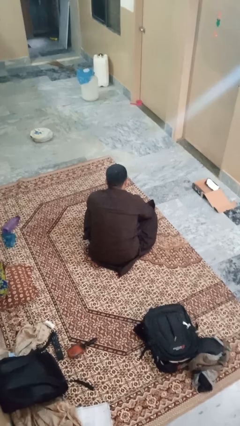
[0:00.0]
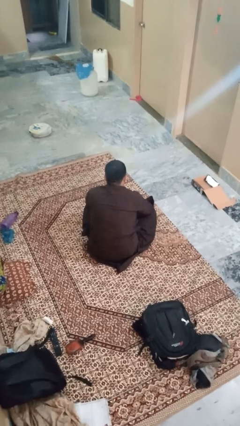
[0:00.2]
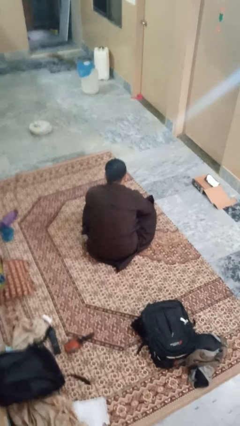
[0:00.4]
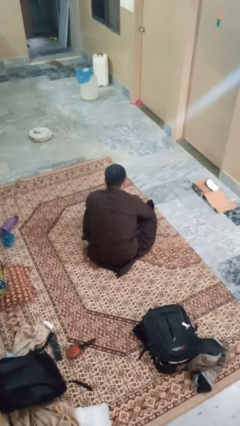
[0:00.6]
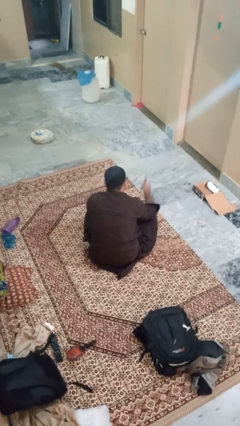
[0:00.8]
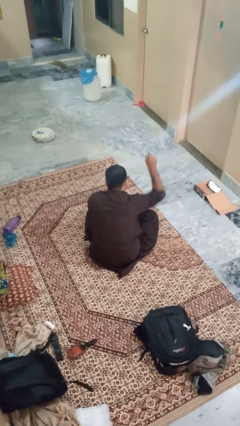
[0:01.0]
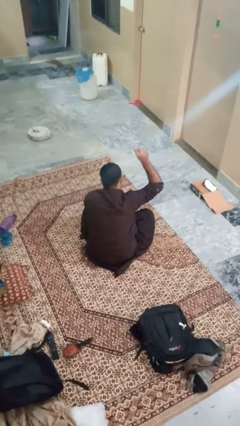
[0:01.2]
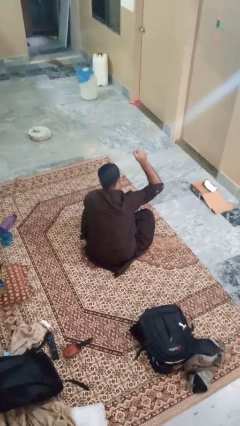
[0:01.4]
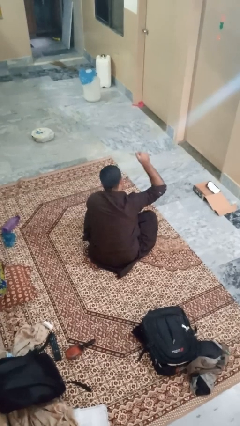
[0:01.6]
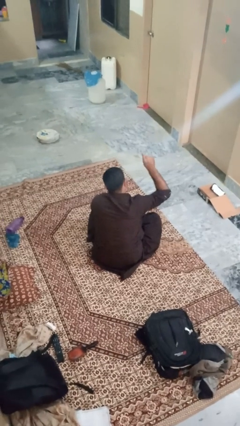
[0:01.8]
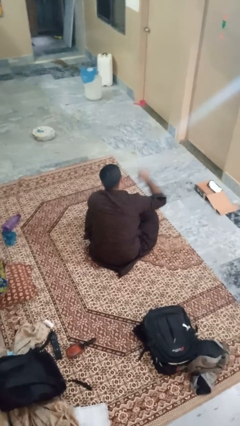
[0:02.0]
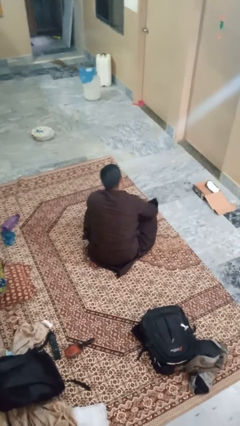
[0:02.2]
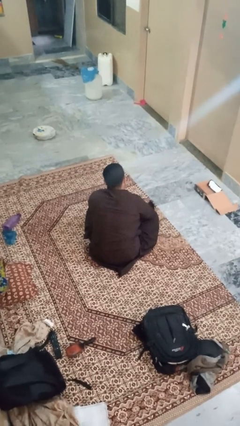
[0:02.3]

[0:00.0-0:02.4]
person gestures number one

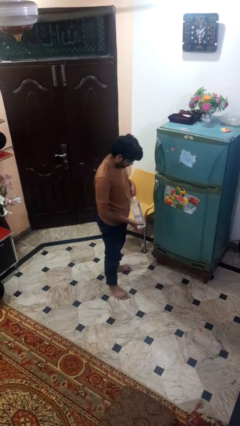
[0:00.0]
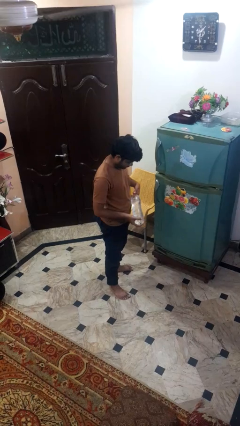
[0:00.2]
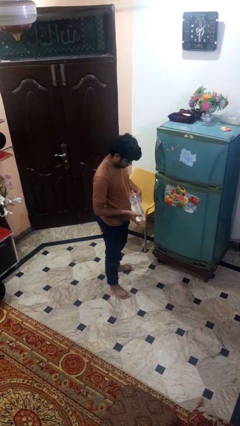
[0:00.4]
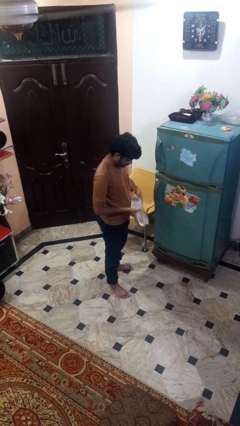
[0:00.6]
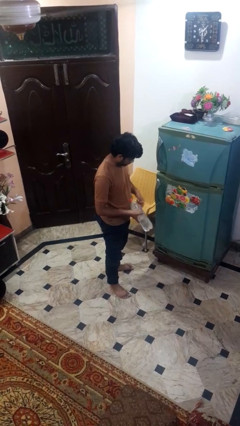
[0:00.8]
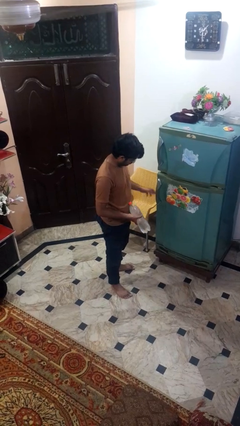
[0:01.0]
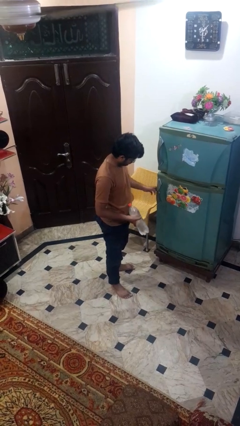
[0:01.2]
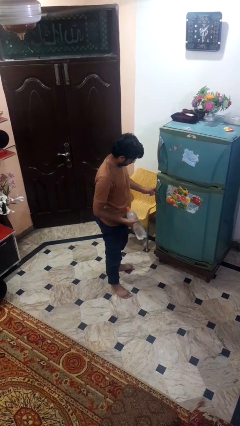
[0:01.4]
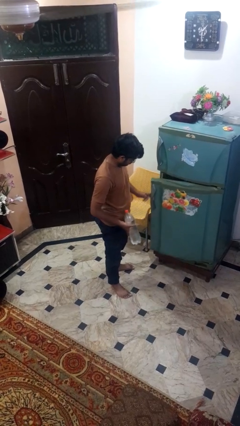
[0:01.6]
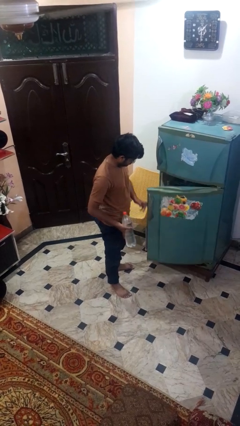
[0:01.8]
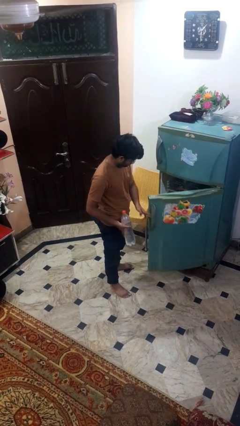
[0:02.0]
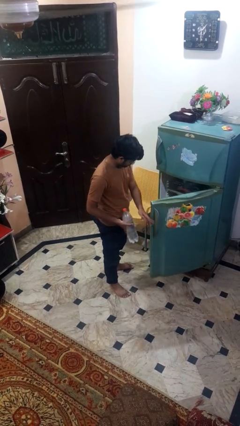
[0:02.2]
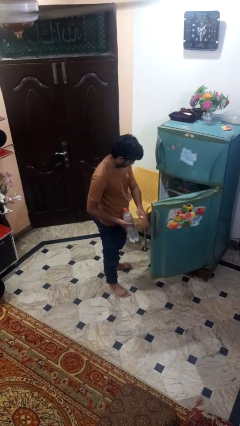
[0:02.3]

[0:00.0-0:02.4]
person opens refrigerator

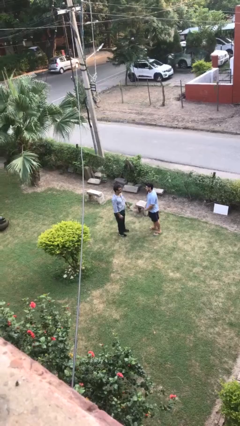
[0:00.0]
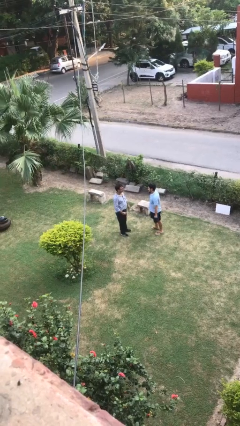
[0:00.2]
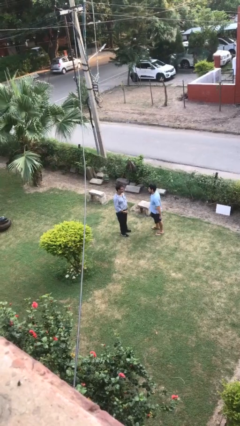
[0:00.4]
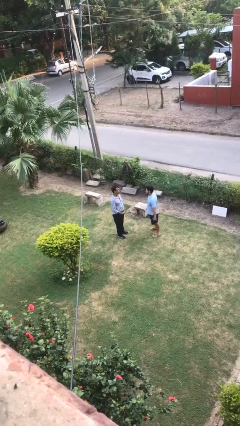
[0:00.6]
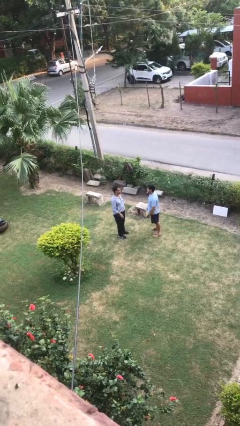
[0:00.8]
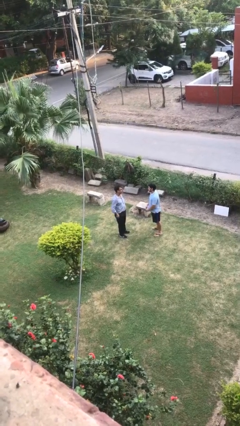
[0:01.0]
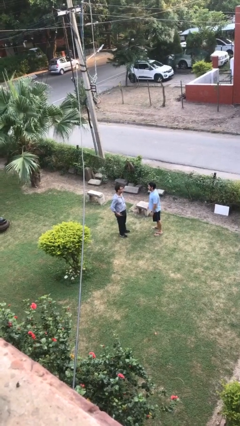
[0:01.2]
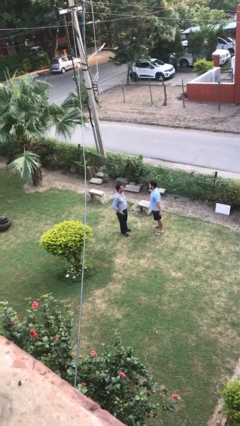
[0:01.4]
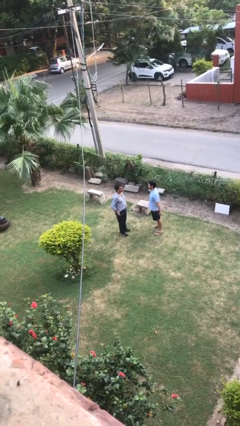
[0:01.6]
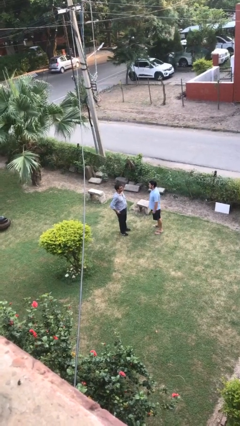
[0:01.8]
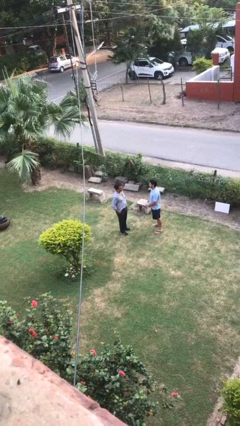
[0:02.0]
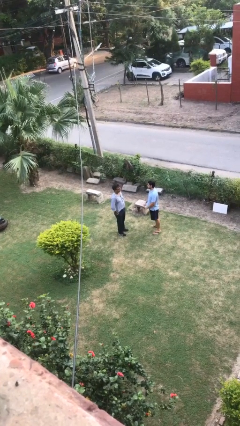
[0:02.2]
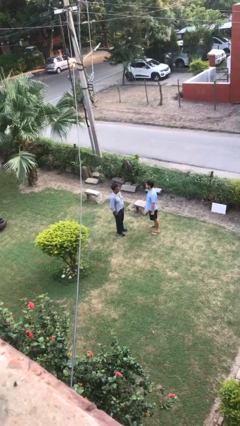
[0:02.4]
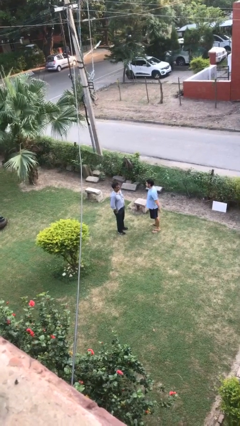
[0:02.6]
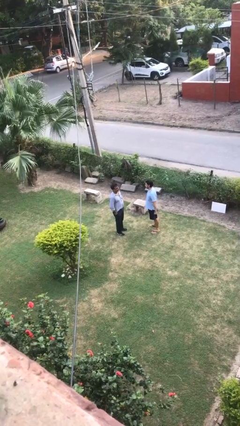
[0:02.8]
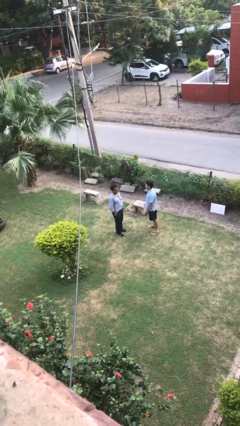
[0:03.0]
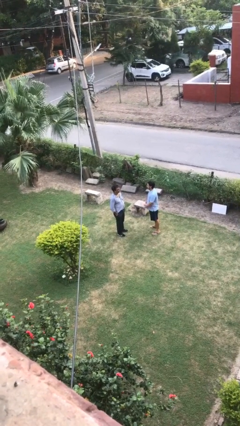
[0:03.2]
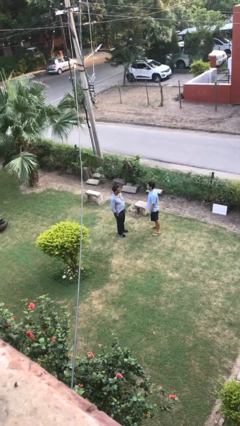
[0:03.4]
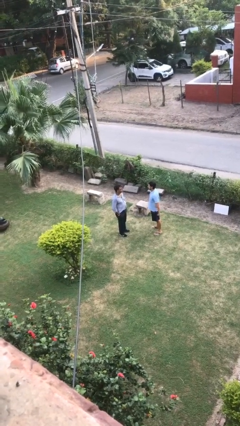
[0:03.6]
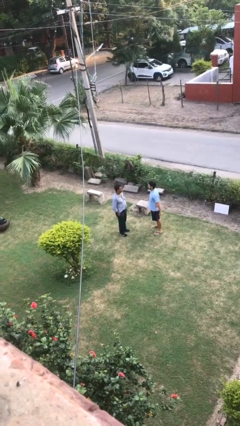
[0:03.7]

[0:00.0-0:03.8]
person talks to person

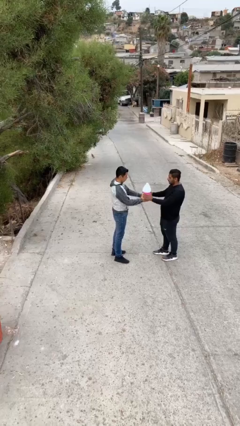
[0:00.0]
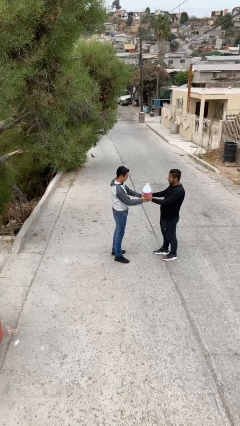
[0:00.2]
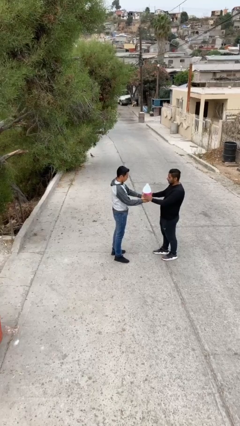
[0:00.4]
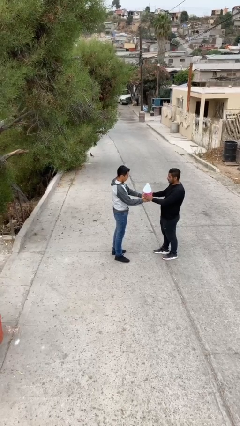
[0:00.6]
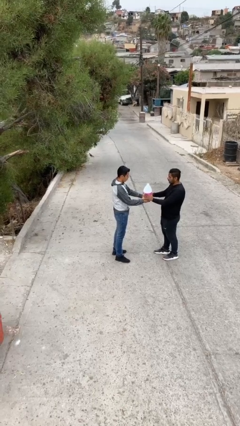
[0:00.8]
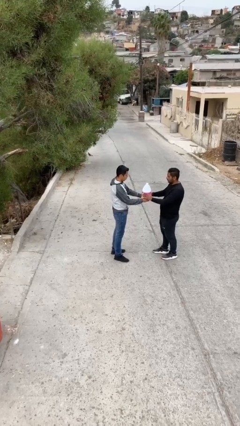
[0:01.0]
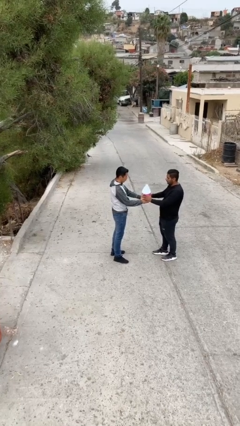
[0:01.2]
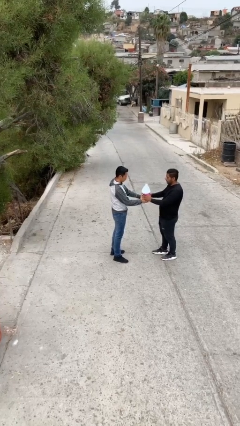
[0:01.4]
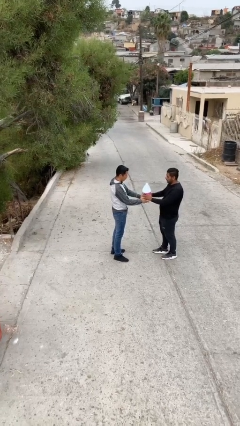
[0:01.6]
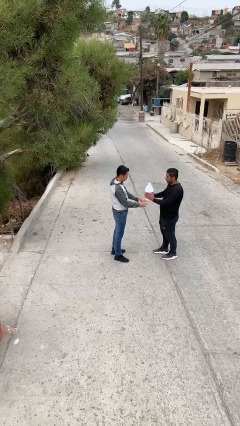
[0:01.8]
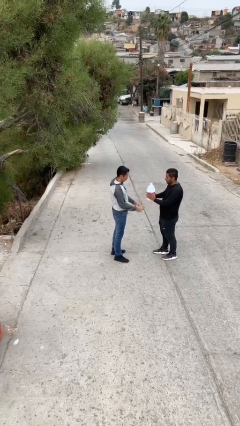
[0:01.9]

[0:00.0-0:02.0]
person transfers object to person

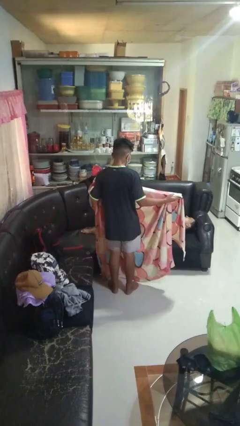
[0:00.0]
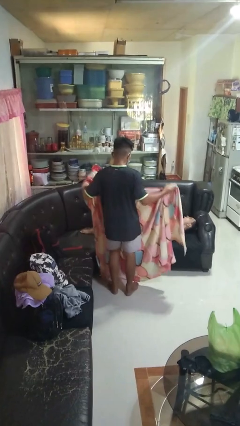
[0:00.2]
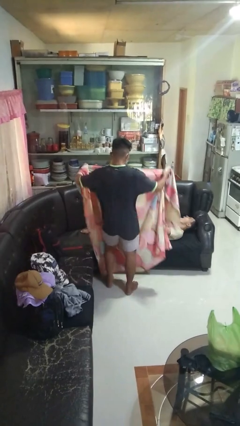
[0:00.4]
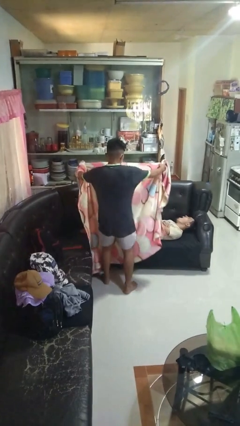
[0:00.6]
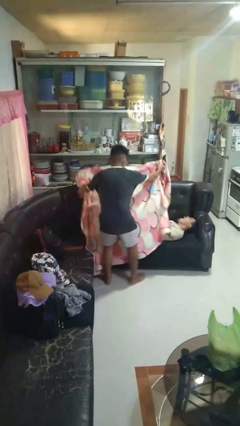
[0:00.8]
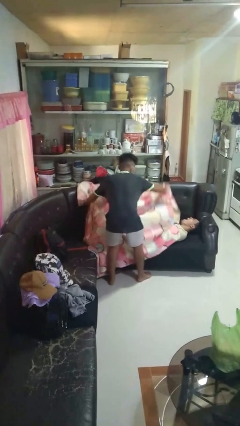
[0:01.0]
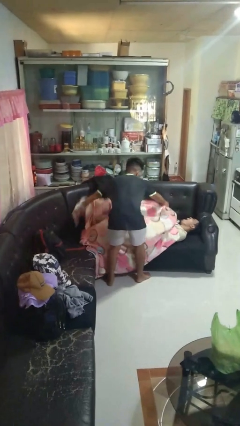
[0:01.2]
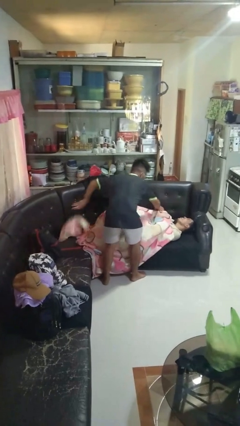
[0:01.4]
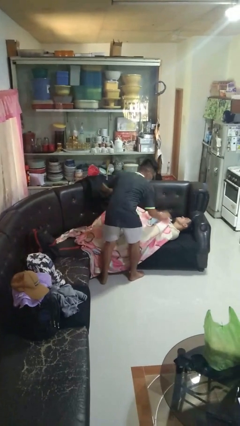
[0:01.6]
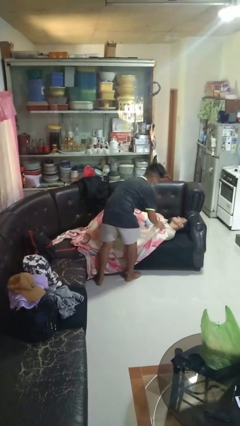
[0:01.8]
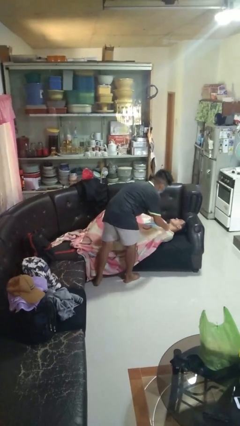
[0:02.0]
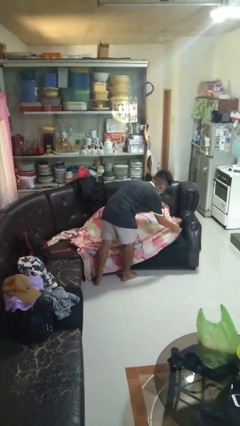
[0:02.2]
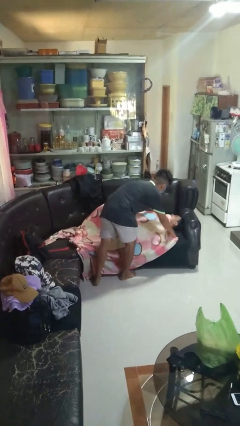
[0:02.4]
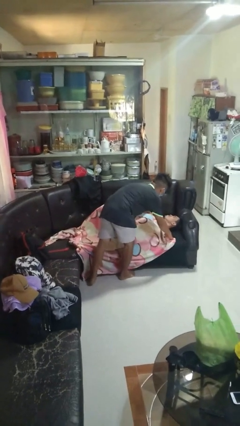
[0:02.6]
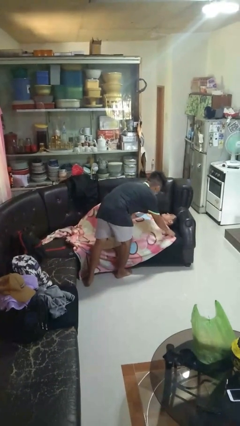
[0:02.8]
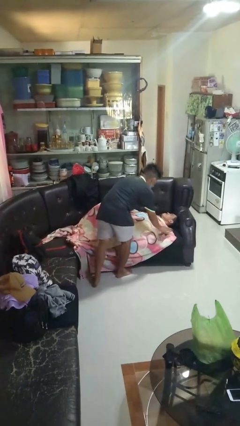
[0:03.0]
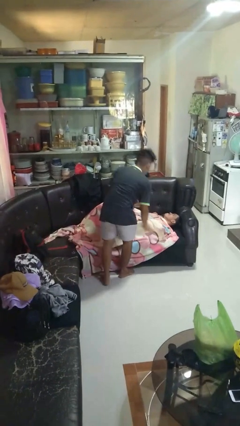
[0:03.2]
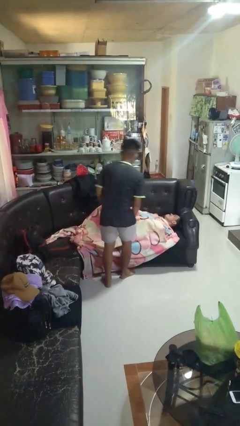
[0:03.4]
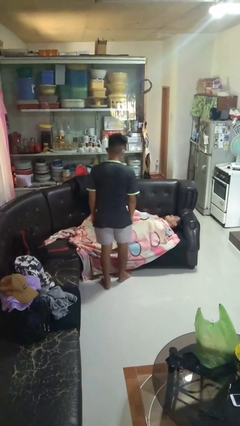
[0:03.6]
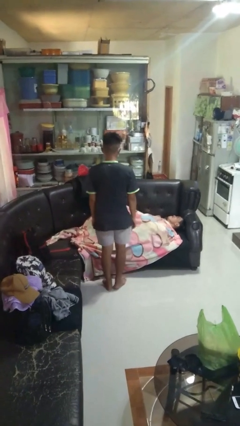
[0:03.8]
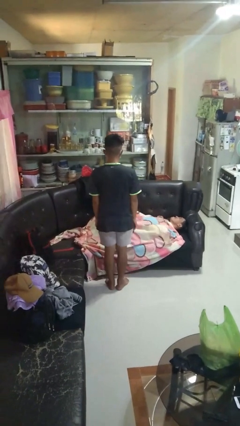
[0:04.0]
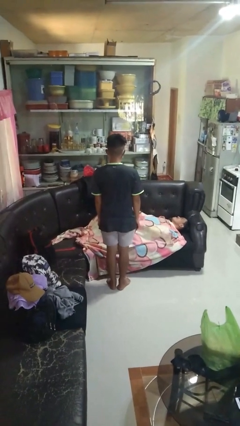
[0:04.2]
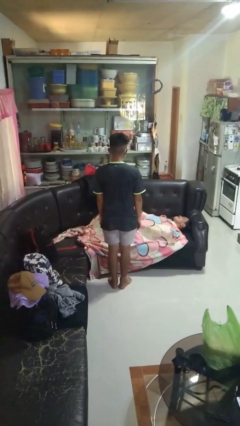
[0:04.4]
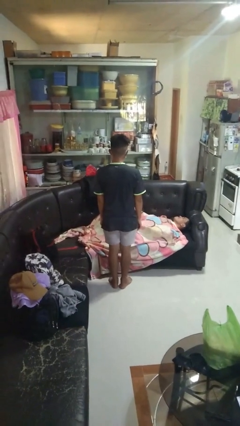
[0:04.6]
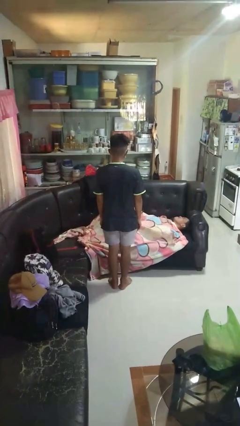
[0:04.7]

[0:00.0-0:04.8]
person covers friend with blanket

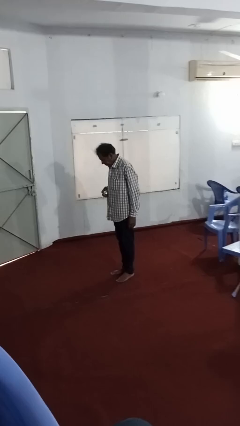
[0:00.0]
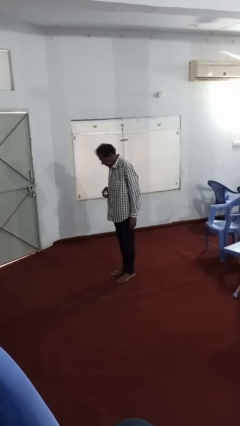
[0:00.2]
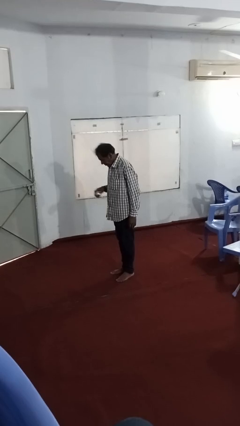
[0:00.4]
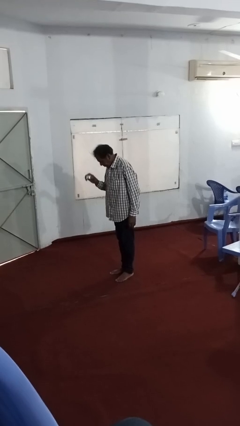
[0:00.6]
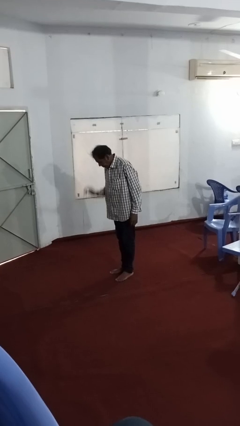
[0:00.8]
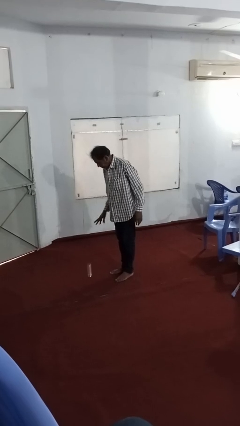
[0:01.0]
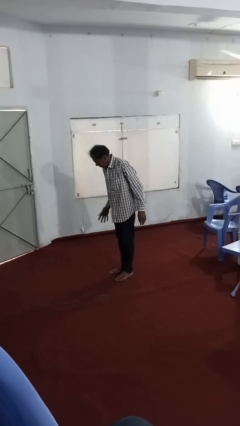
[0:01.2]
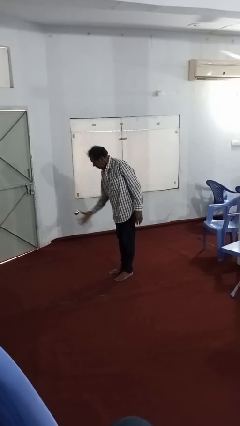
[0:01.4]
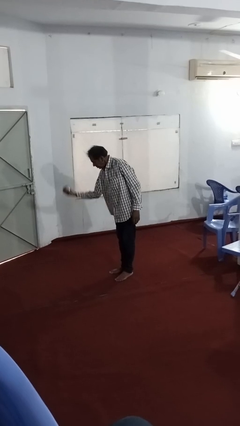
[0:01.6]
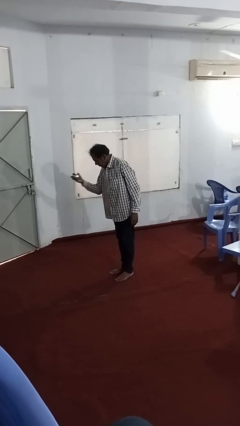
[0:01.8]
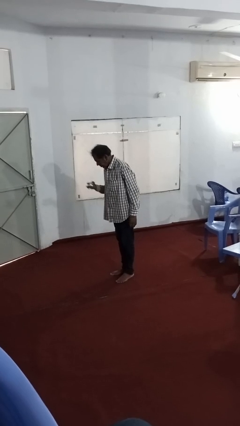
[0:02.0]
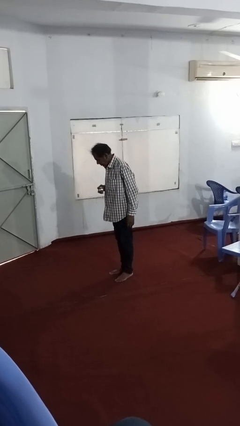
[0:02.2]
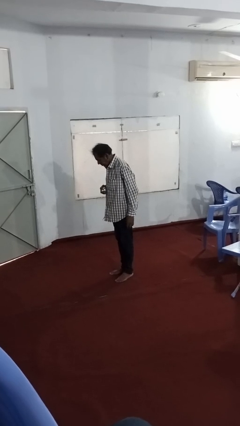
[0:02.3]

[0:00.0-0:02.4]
person bounces ball on floor
